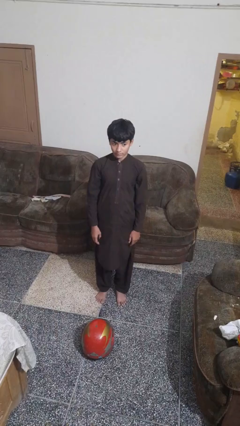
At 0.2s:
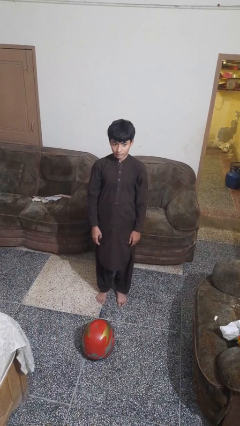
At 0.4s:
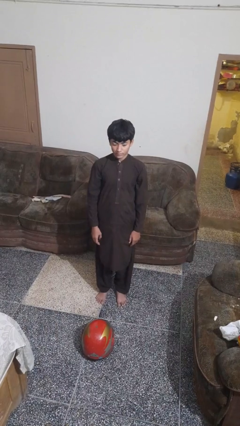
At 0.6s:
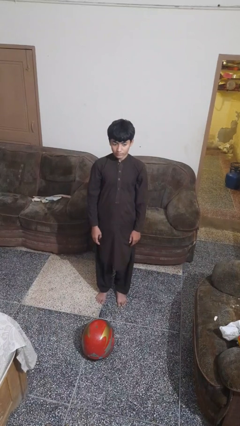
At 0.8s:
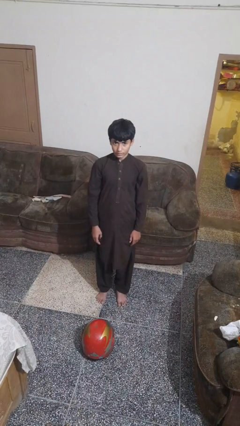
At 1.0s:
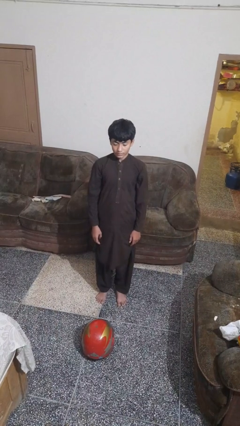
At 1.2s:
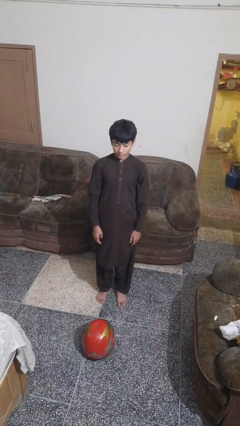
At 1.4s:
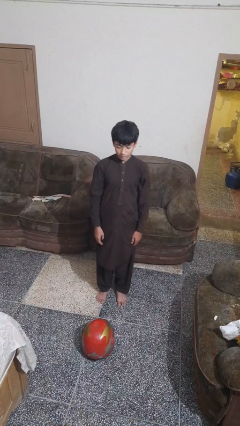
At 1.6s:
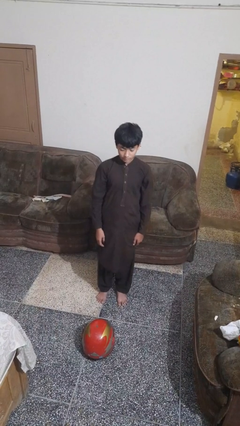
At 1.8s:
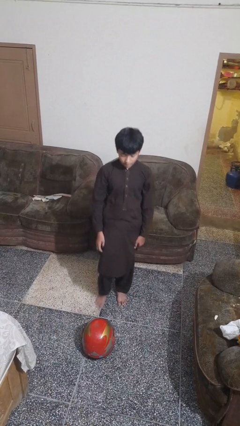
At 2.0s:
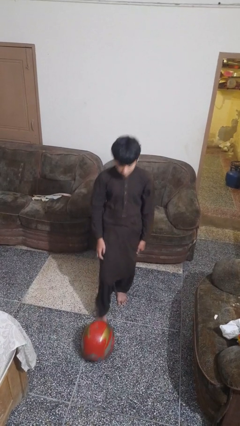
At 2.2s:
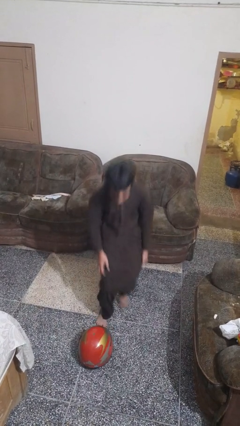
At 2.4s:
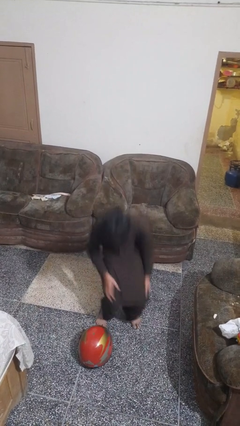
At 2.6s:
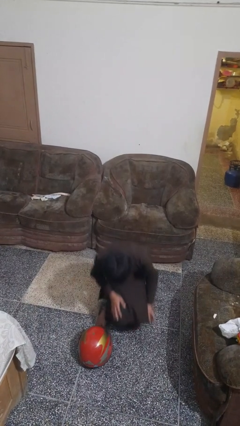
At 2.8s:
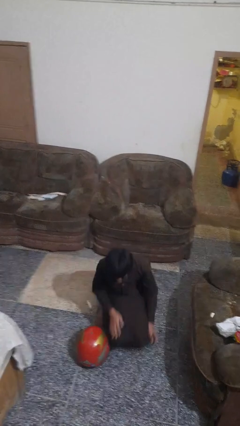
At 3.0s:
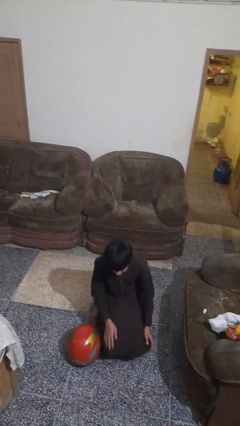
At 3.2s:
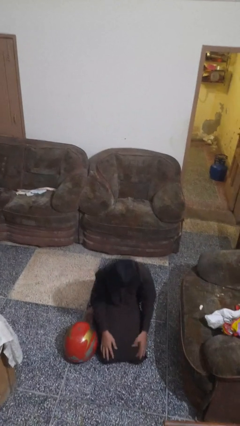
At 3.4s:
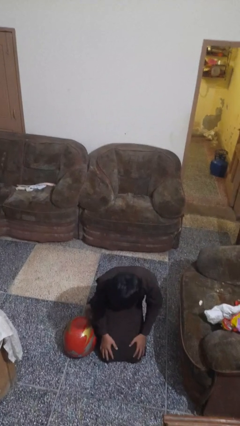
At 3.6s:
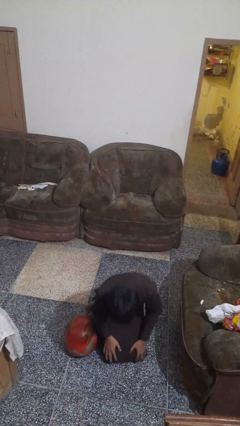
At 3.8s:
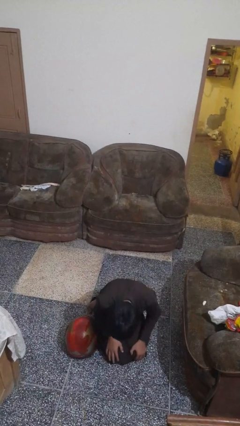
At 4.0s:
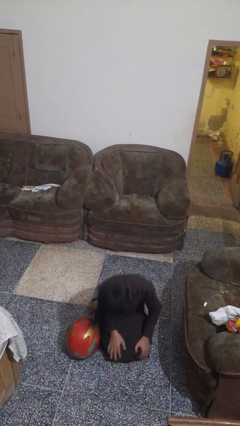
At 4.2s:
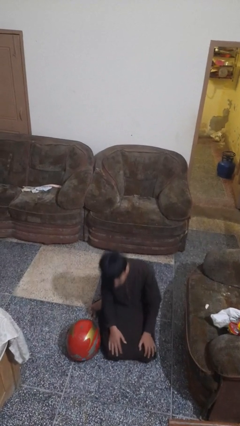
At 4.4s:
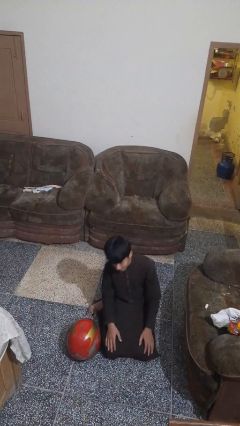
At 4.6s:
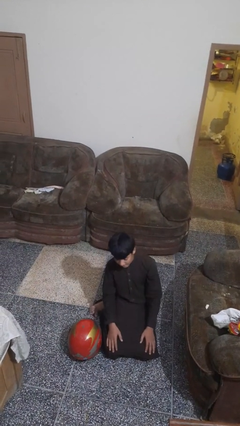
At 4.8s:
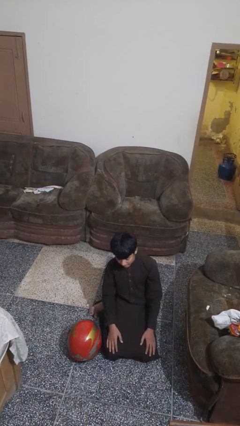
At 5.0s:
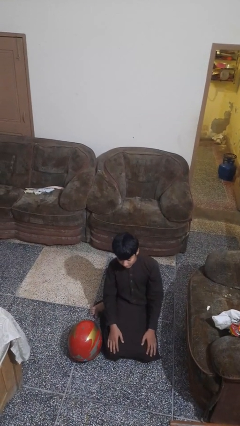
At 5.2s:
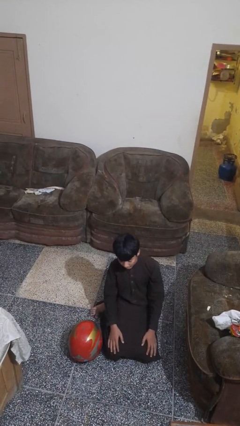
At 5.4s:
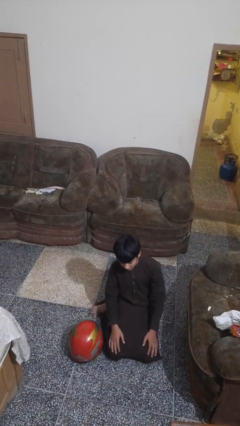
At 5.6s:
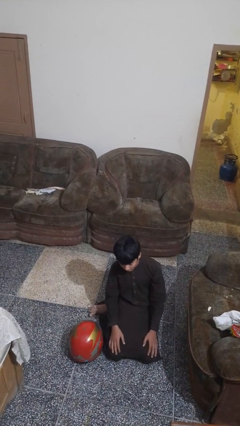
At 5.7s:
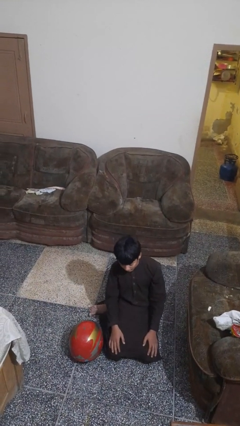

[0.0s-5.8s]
person trips on object on floor

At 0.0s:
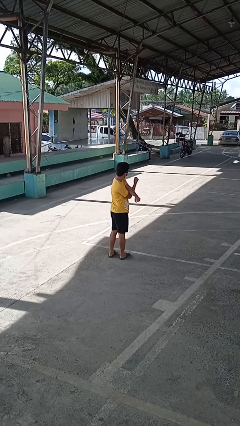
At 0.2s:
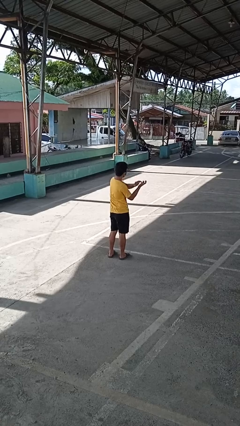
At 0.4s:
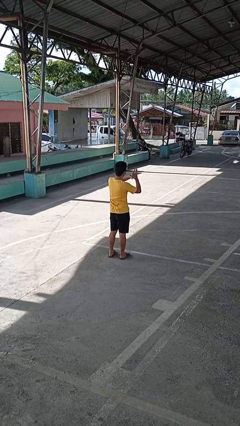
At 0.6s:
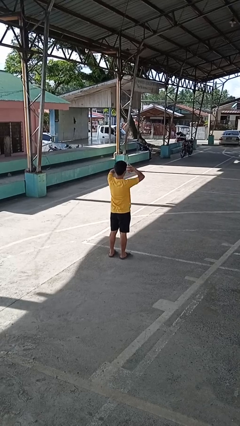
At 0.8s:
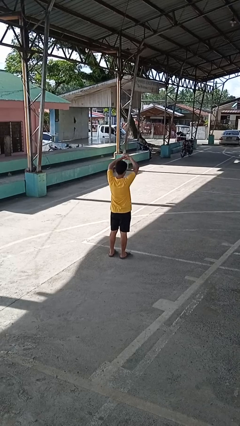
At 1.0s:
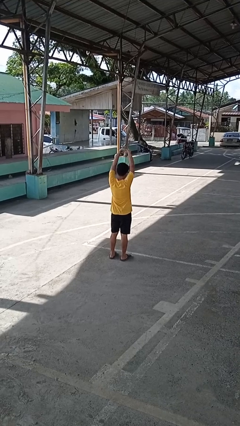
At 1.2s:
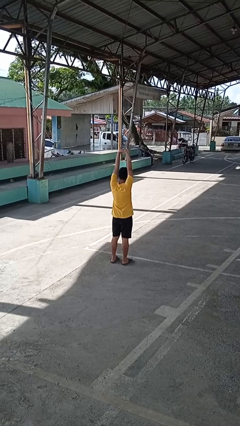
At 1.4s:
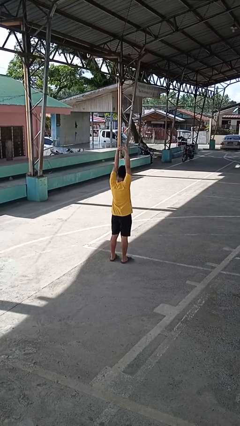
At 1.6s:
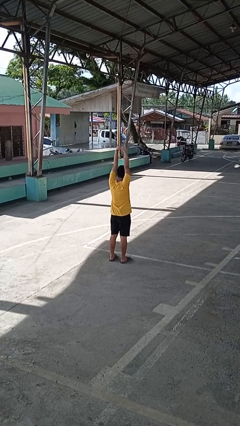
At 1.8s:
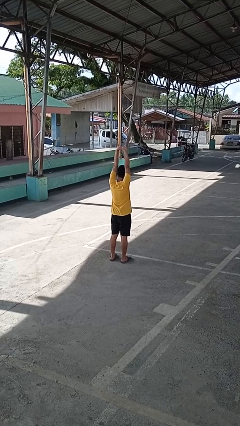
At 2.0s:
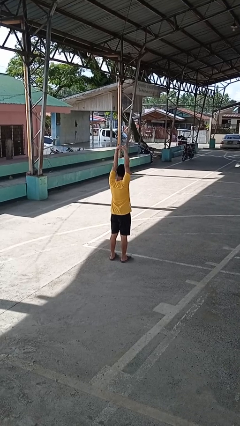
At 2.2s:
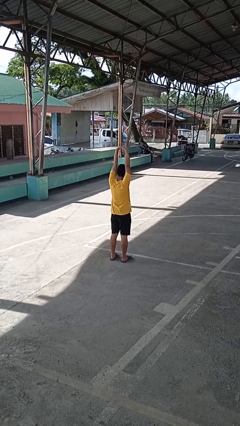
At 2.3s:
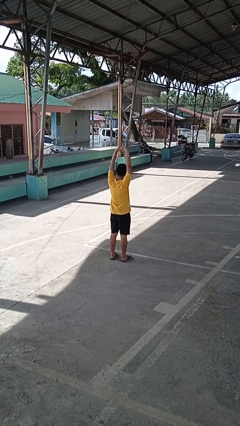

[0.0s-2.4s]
person stretches arms over head

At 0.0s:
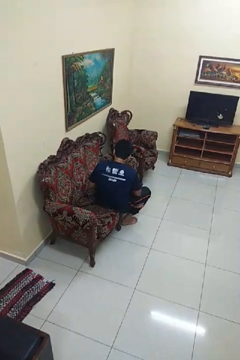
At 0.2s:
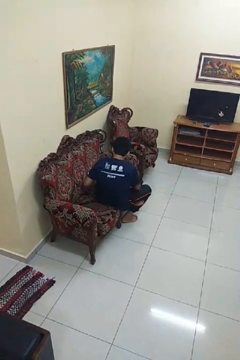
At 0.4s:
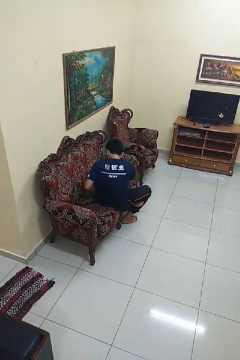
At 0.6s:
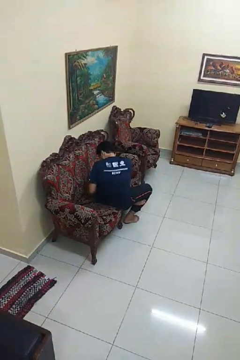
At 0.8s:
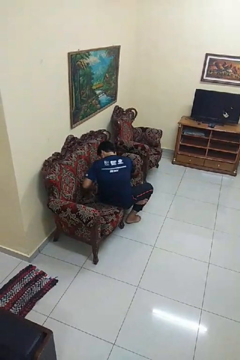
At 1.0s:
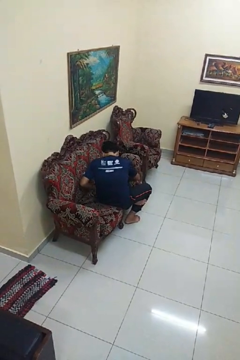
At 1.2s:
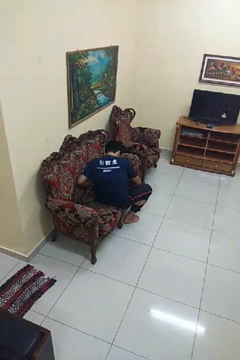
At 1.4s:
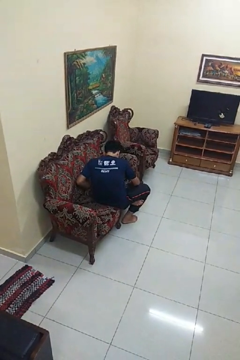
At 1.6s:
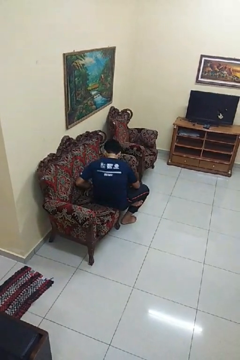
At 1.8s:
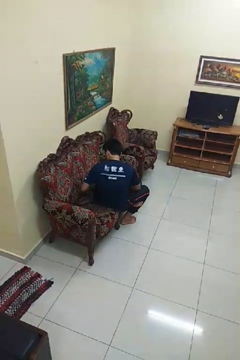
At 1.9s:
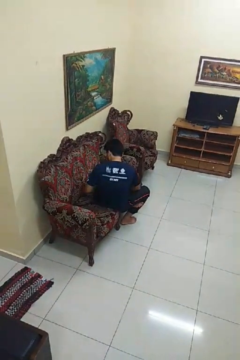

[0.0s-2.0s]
person searches in couch

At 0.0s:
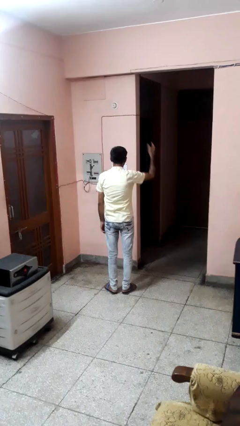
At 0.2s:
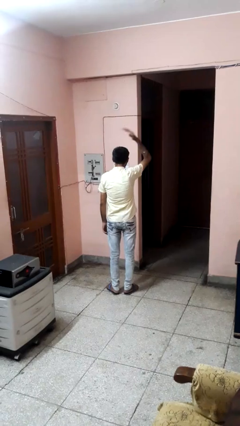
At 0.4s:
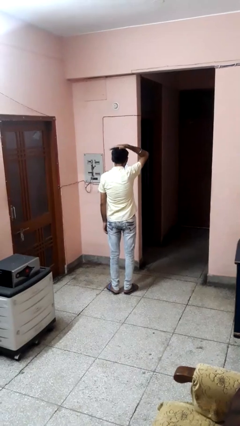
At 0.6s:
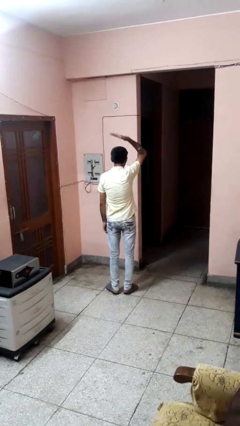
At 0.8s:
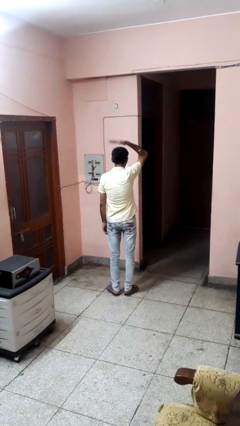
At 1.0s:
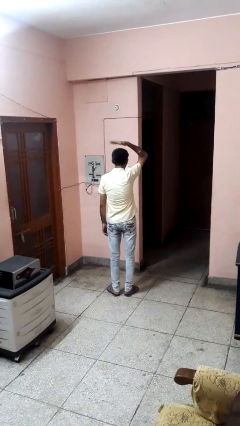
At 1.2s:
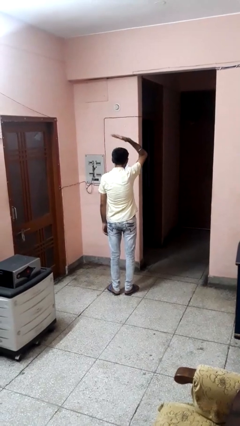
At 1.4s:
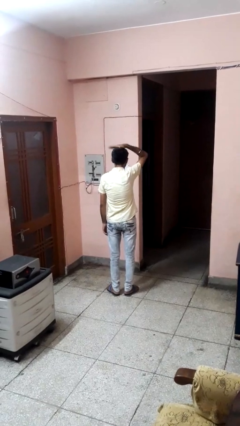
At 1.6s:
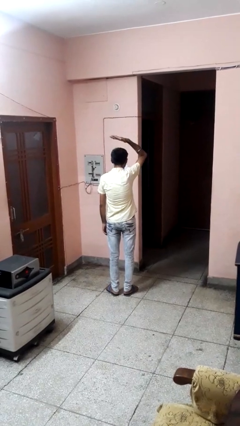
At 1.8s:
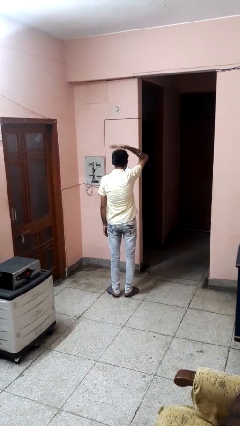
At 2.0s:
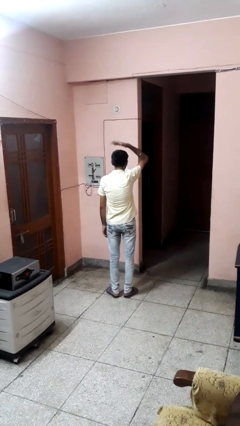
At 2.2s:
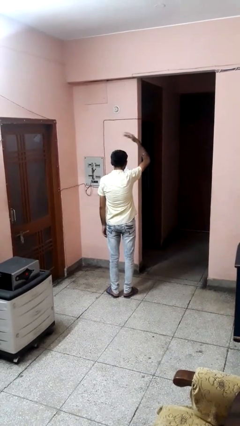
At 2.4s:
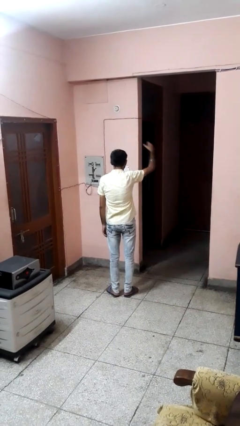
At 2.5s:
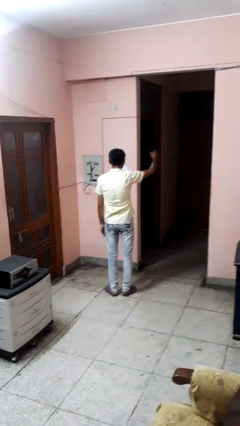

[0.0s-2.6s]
person pats head

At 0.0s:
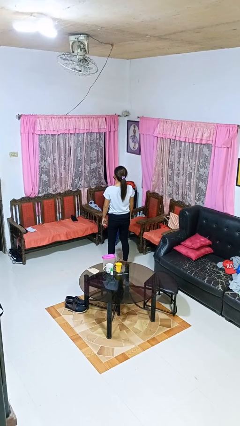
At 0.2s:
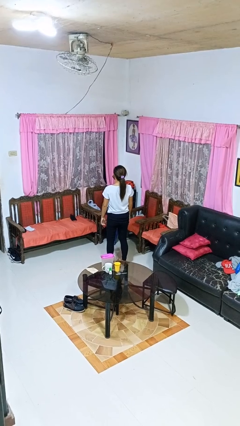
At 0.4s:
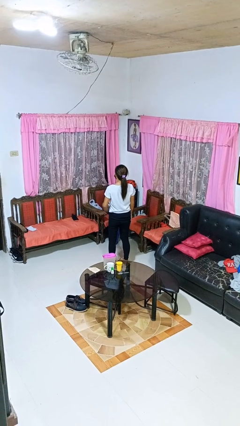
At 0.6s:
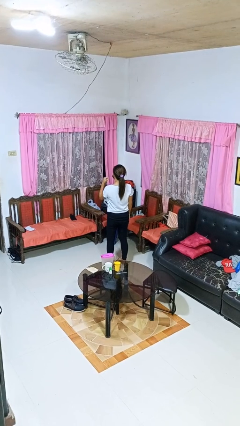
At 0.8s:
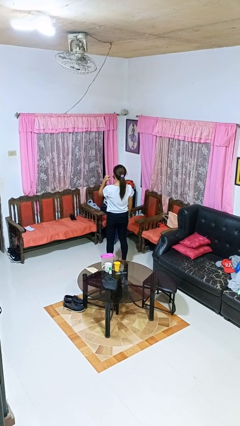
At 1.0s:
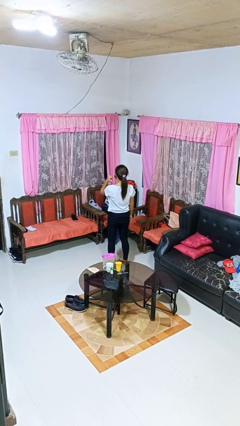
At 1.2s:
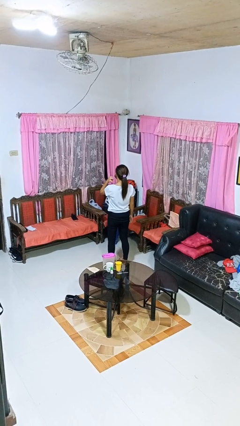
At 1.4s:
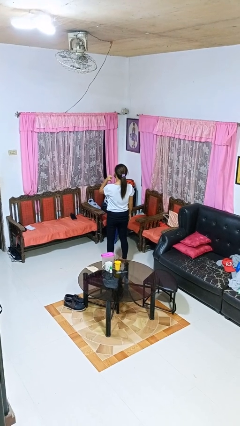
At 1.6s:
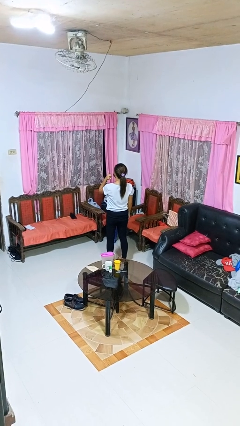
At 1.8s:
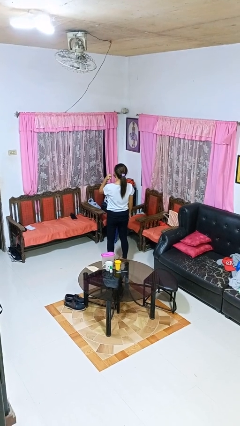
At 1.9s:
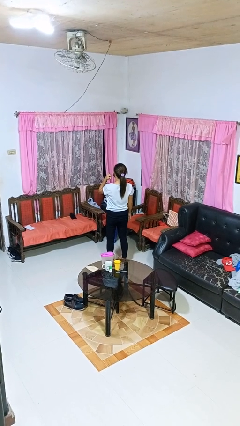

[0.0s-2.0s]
person gestures behind me

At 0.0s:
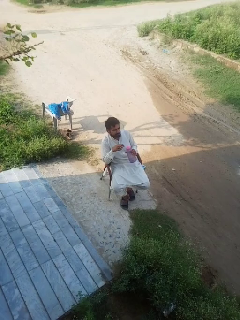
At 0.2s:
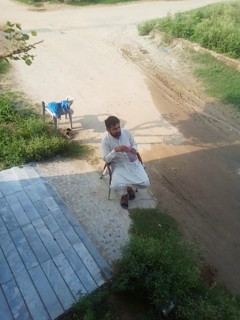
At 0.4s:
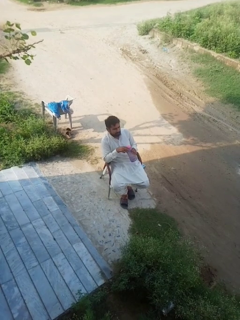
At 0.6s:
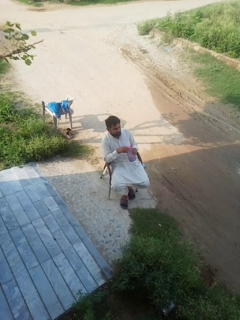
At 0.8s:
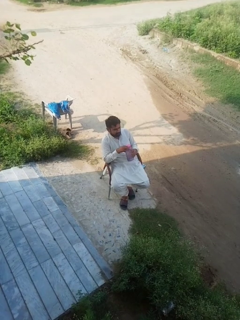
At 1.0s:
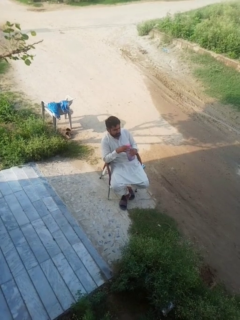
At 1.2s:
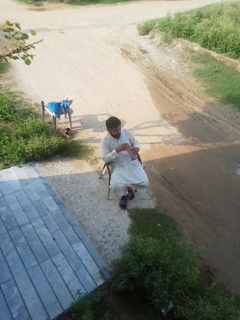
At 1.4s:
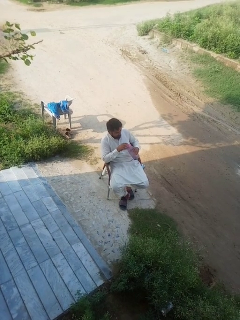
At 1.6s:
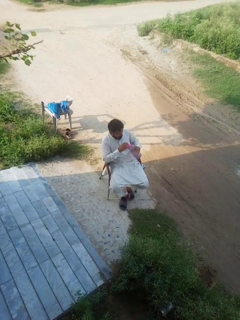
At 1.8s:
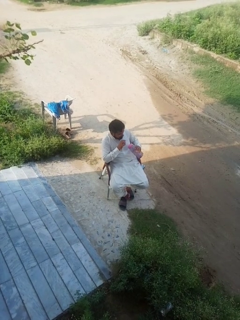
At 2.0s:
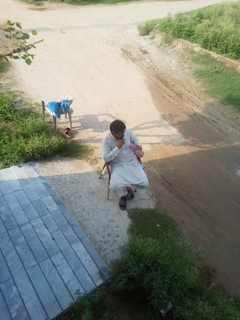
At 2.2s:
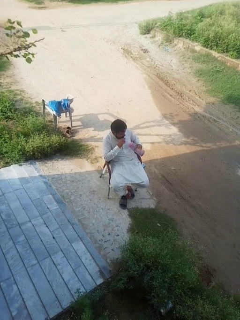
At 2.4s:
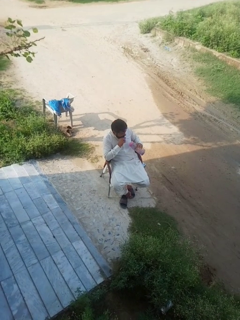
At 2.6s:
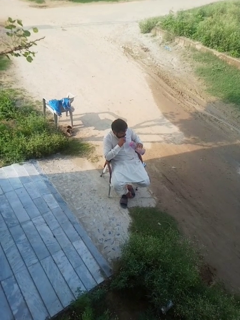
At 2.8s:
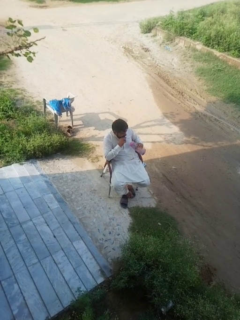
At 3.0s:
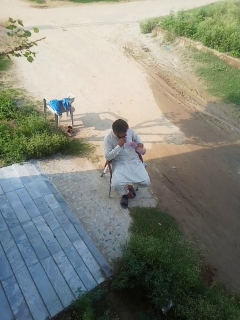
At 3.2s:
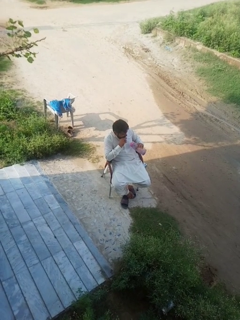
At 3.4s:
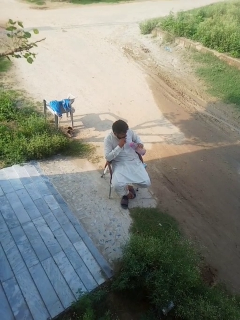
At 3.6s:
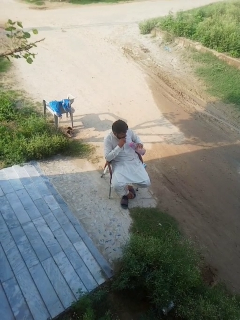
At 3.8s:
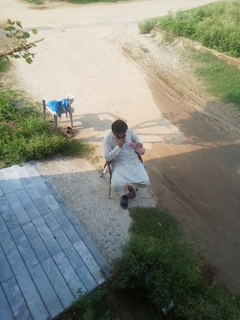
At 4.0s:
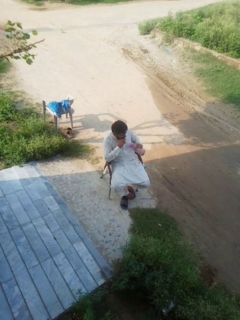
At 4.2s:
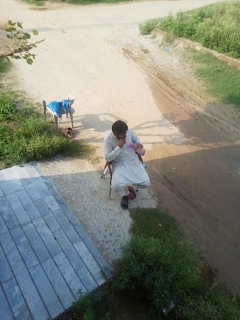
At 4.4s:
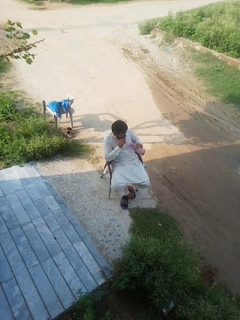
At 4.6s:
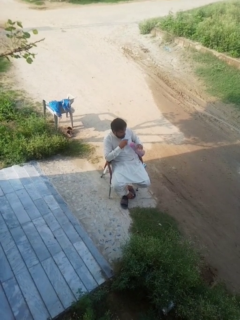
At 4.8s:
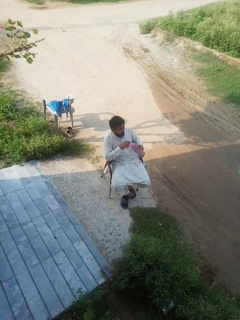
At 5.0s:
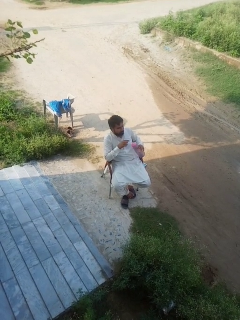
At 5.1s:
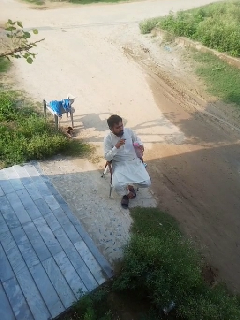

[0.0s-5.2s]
person drinks from straw
